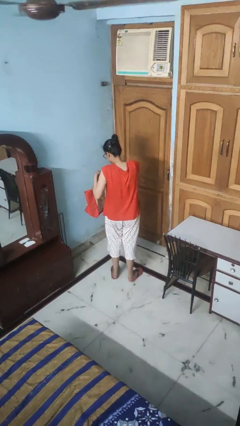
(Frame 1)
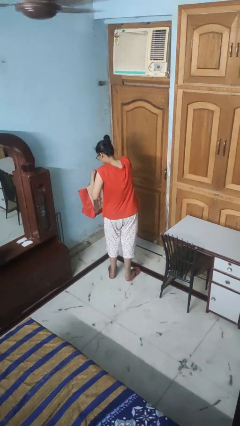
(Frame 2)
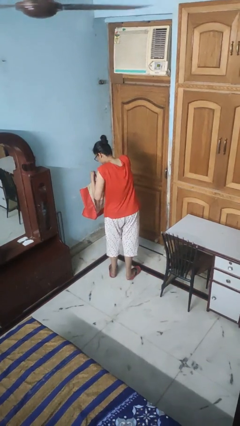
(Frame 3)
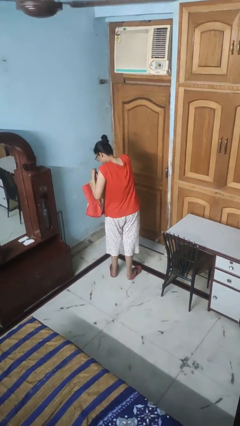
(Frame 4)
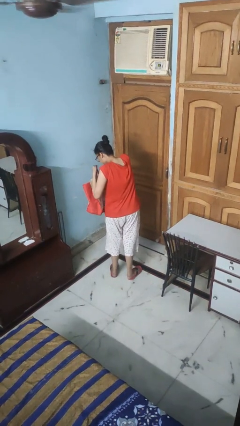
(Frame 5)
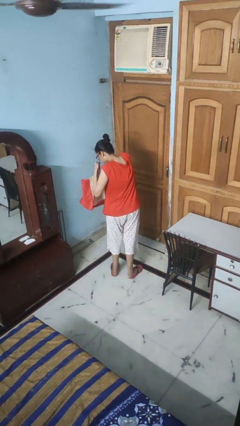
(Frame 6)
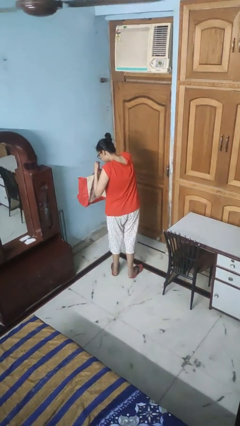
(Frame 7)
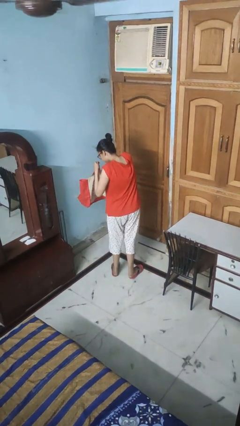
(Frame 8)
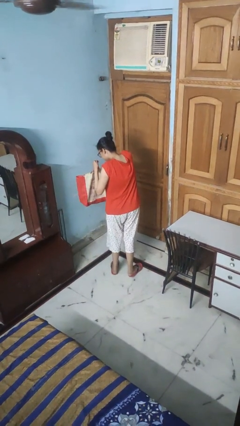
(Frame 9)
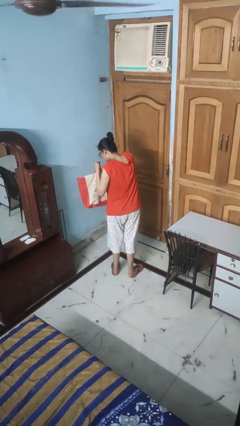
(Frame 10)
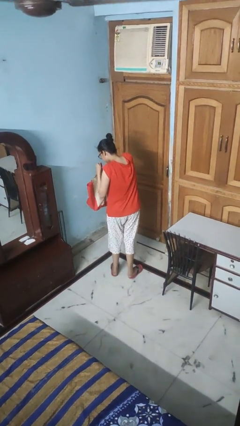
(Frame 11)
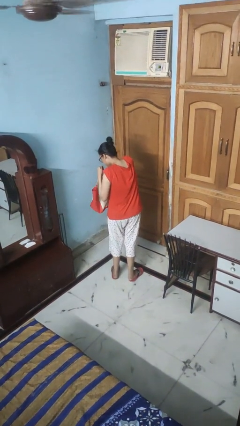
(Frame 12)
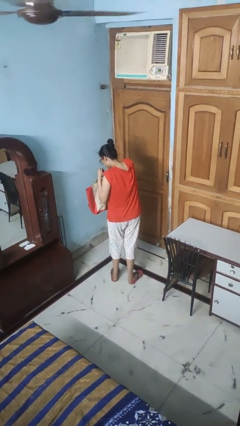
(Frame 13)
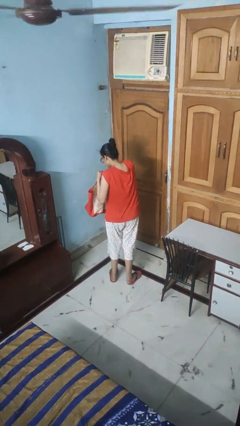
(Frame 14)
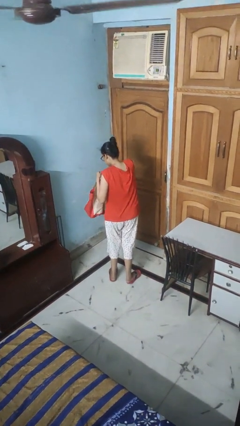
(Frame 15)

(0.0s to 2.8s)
person searches in bag

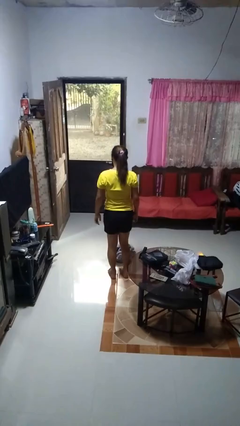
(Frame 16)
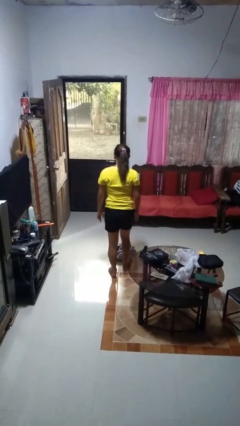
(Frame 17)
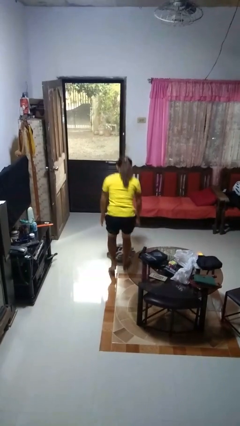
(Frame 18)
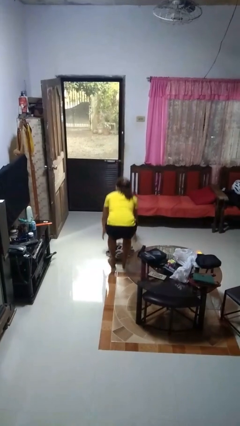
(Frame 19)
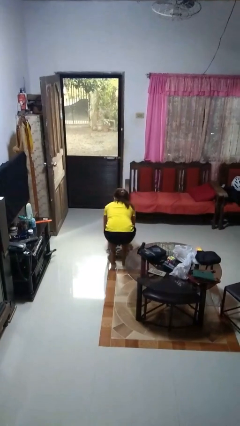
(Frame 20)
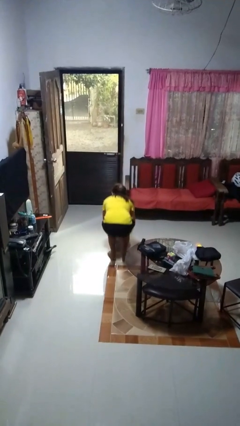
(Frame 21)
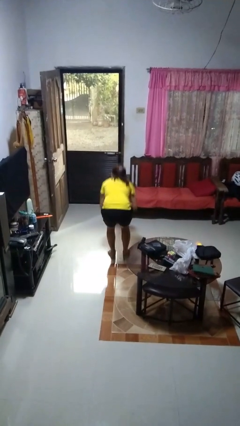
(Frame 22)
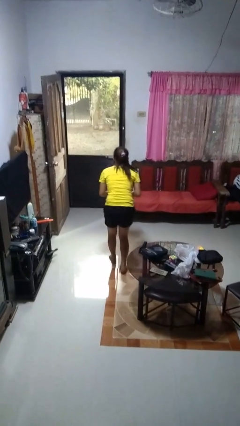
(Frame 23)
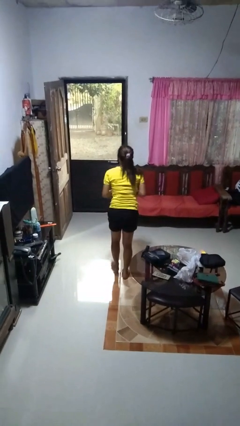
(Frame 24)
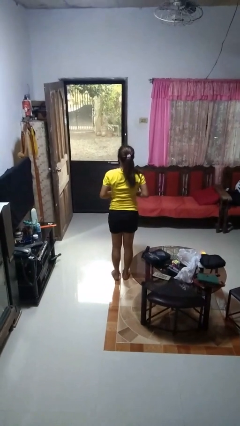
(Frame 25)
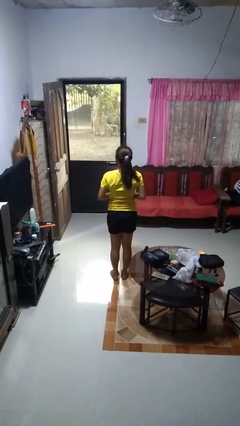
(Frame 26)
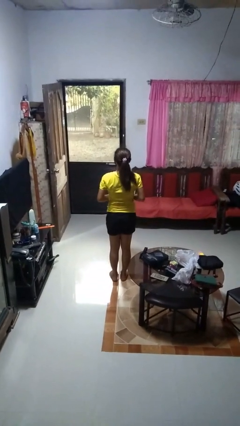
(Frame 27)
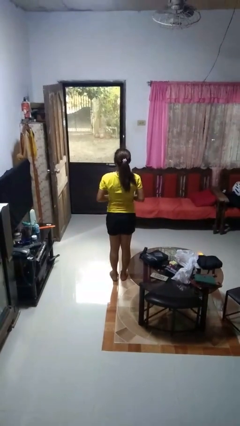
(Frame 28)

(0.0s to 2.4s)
person picks up object from floor

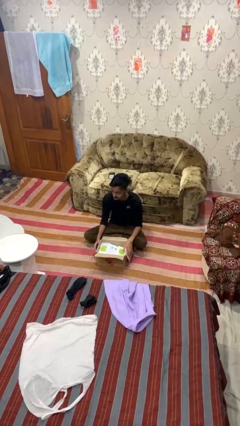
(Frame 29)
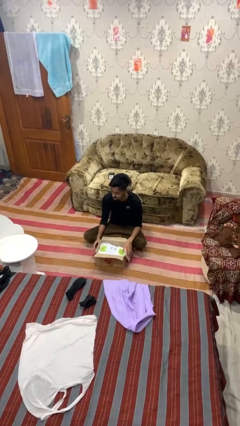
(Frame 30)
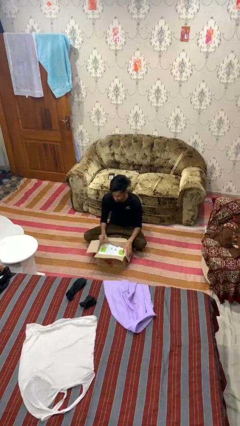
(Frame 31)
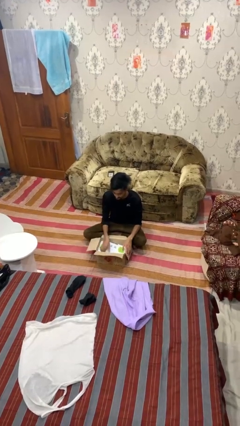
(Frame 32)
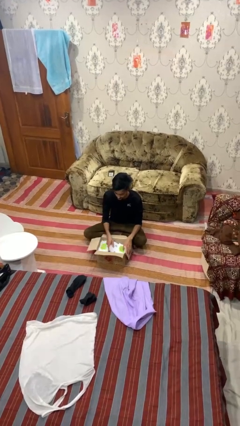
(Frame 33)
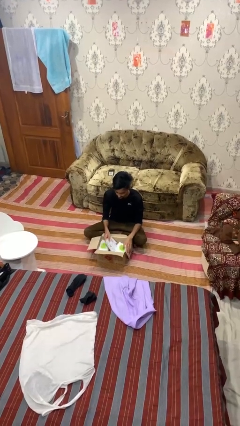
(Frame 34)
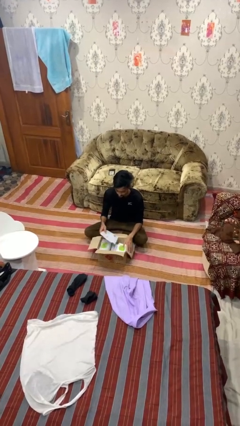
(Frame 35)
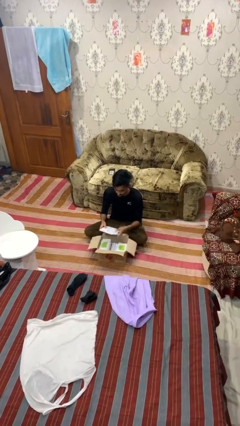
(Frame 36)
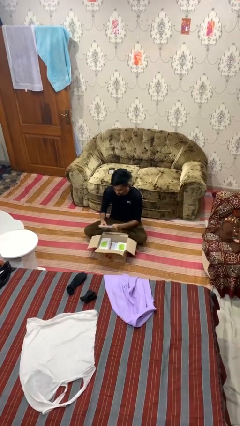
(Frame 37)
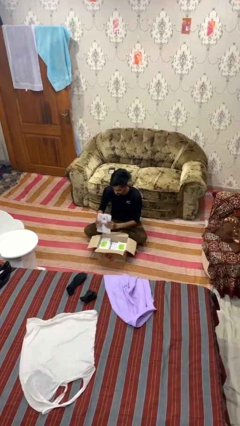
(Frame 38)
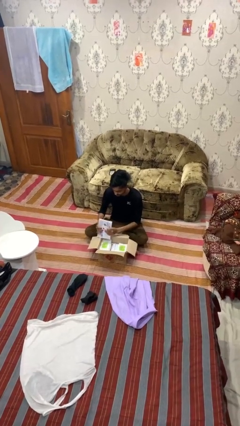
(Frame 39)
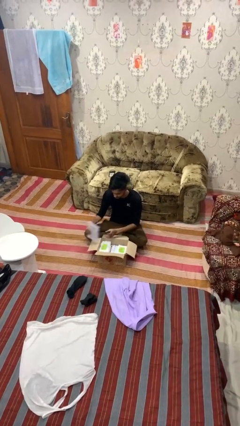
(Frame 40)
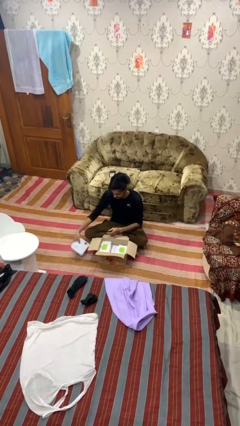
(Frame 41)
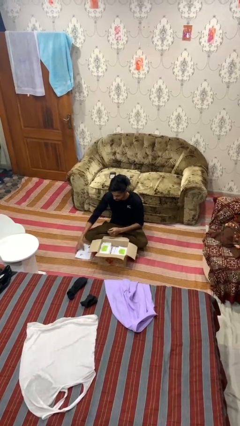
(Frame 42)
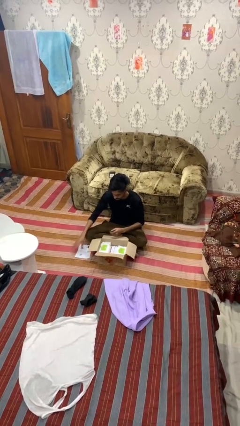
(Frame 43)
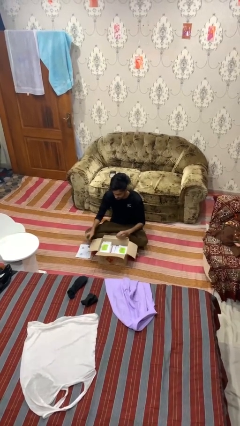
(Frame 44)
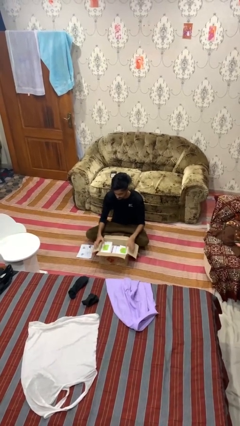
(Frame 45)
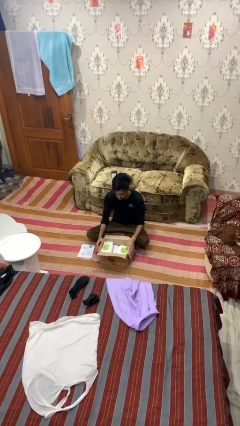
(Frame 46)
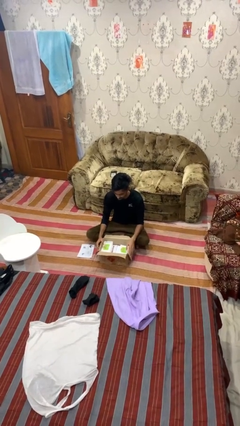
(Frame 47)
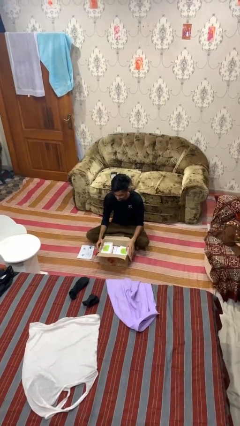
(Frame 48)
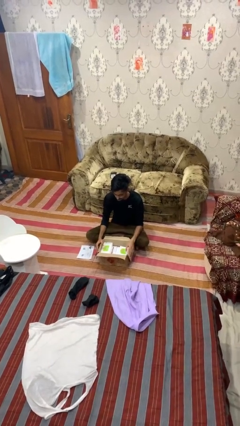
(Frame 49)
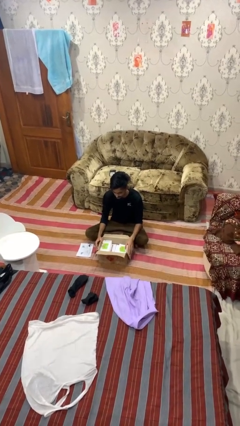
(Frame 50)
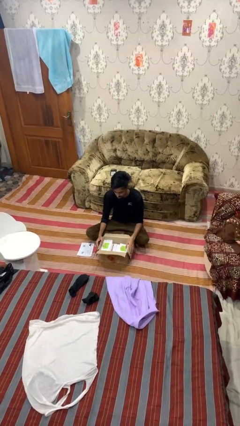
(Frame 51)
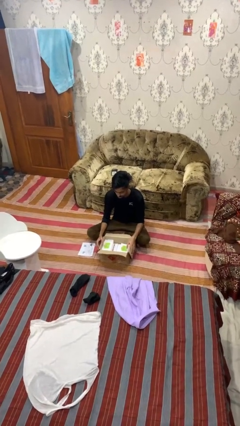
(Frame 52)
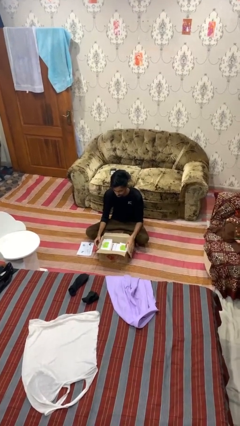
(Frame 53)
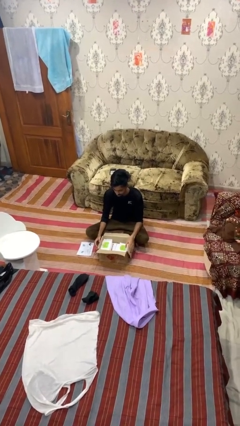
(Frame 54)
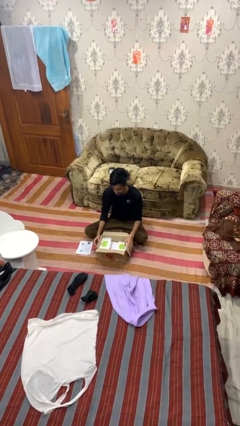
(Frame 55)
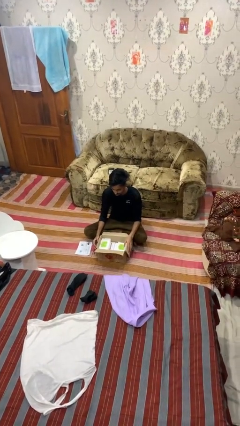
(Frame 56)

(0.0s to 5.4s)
person takes object from box

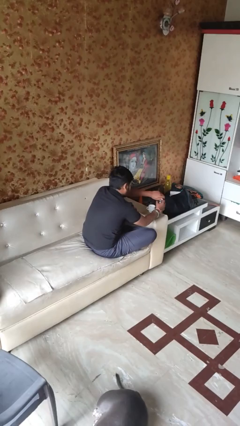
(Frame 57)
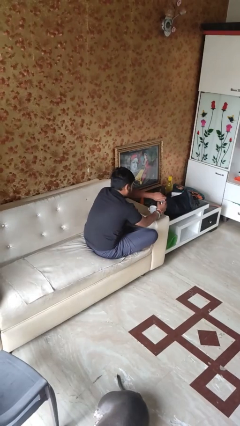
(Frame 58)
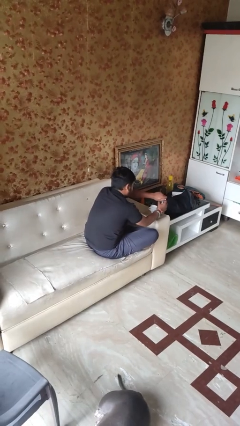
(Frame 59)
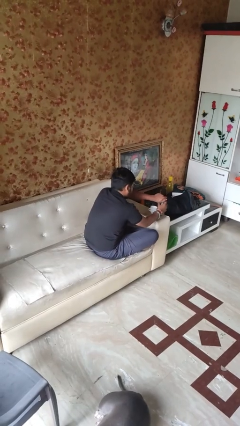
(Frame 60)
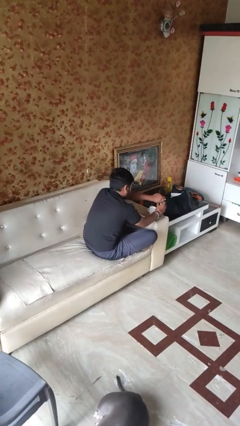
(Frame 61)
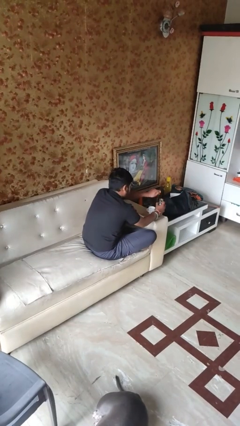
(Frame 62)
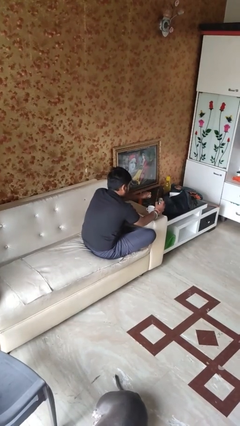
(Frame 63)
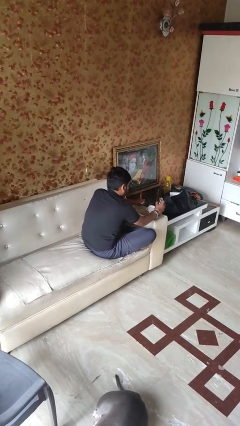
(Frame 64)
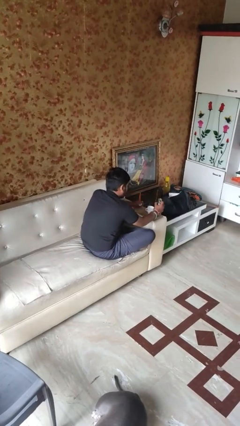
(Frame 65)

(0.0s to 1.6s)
person unscrews lid from bottle

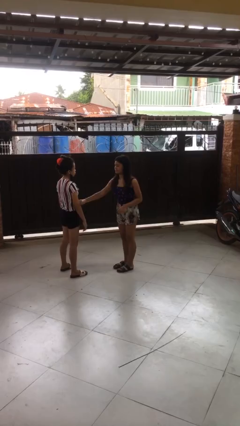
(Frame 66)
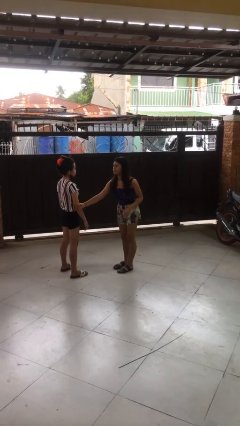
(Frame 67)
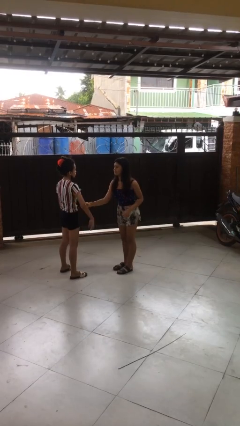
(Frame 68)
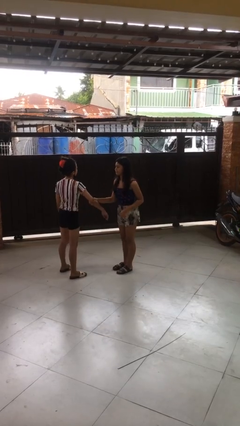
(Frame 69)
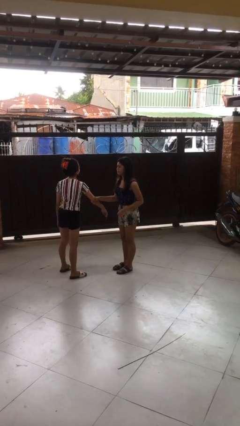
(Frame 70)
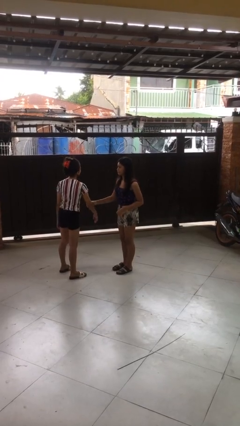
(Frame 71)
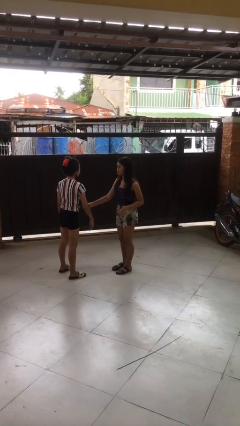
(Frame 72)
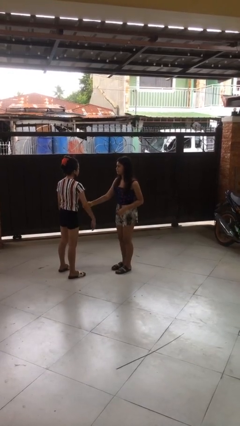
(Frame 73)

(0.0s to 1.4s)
person grabs person by forearm

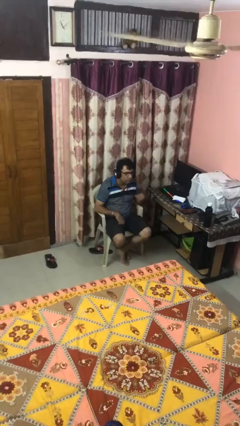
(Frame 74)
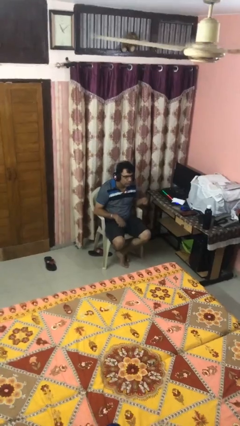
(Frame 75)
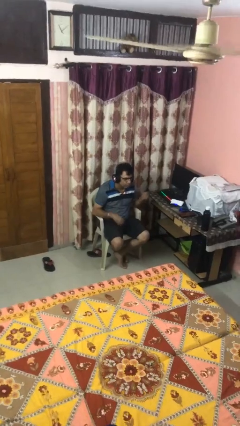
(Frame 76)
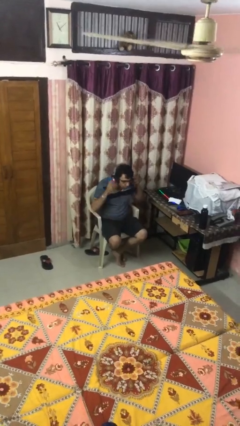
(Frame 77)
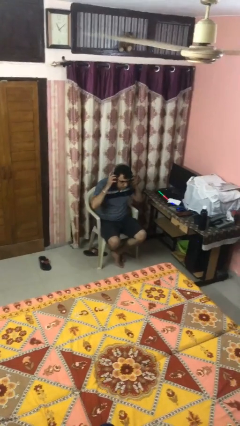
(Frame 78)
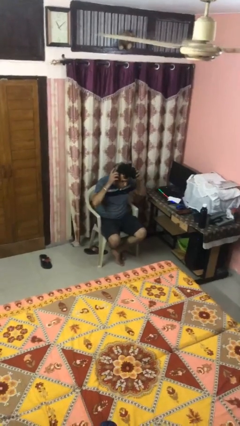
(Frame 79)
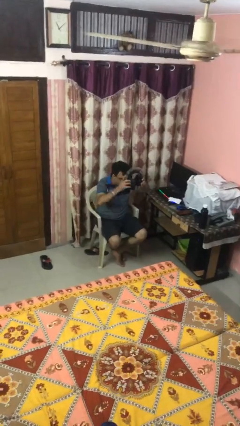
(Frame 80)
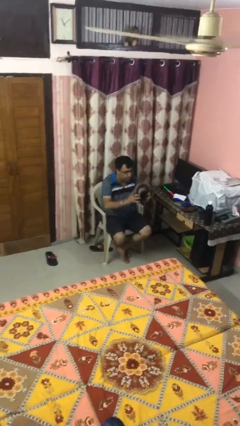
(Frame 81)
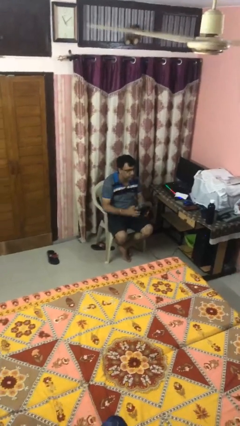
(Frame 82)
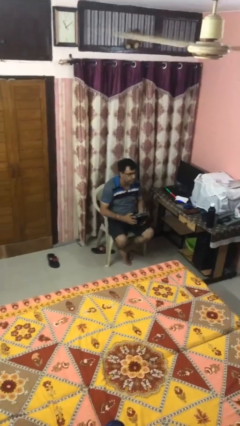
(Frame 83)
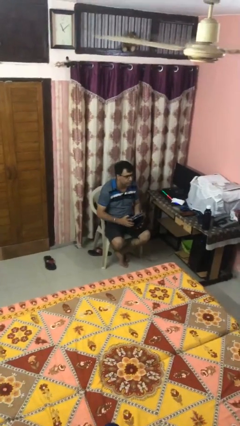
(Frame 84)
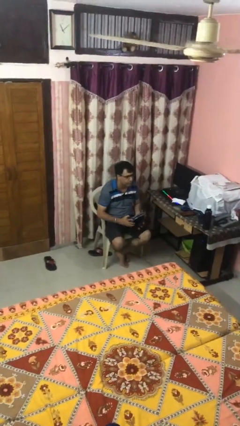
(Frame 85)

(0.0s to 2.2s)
person takes off headphones

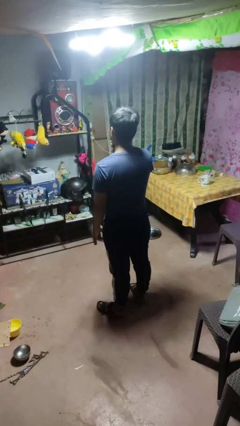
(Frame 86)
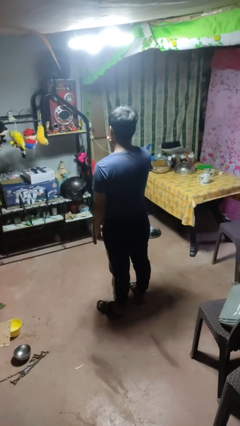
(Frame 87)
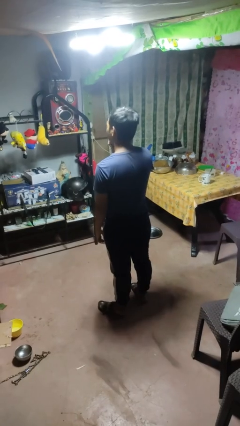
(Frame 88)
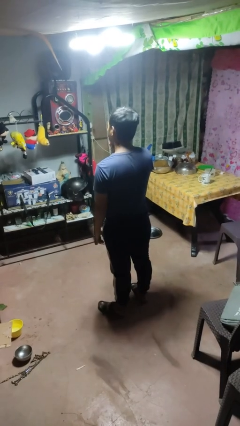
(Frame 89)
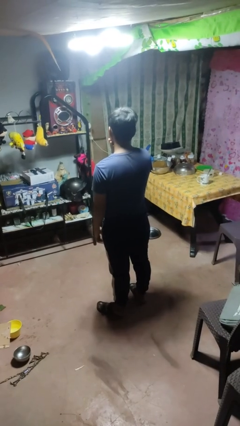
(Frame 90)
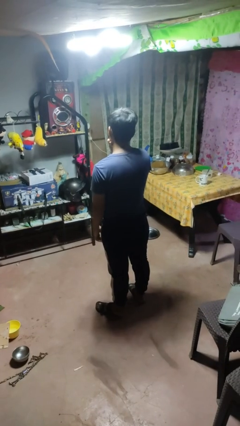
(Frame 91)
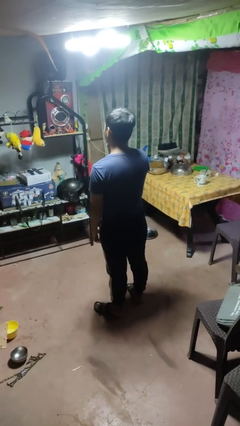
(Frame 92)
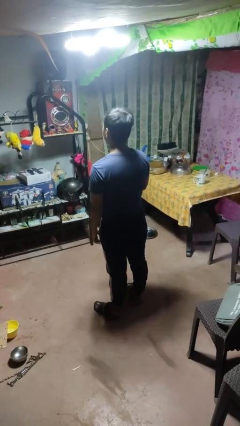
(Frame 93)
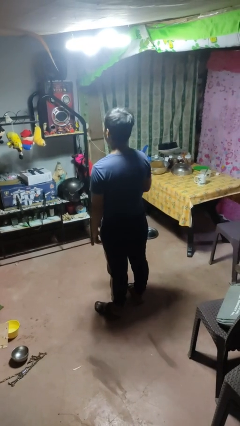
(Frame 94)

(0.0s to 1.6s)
person strokes chin
